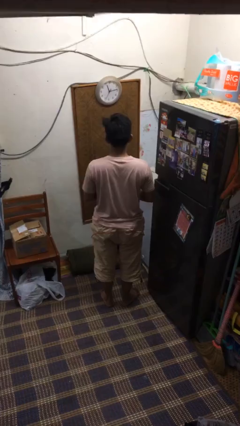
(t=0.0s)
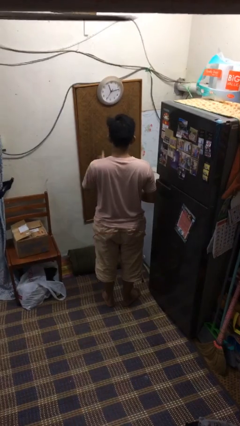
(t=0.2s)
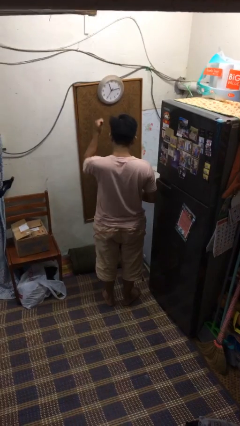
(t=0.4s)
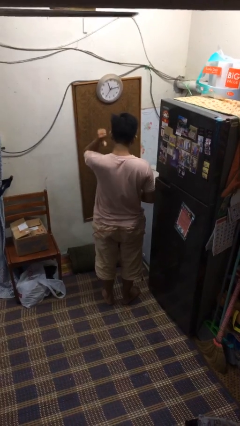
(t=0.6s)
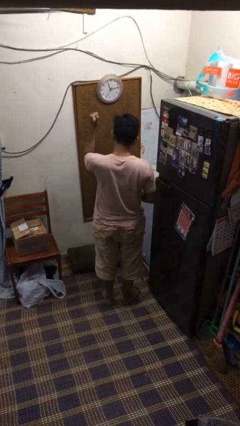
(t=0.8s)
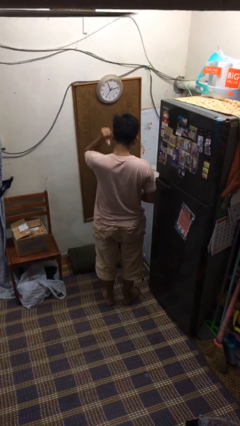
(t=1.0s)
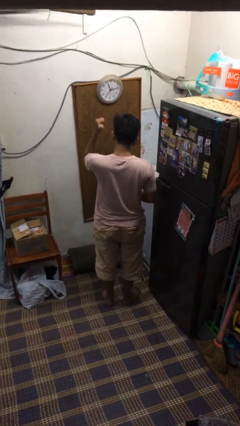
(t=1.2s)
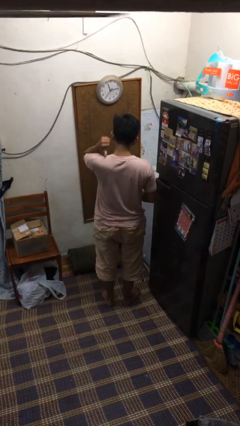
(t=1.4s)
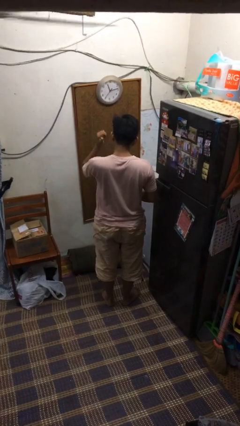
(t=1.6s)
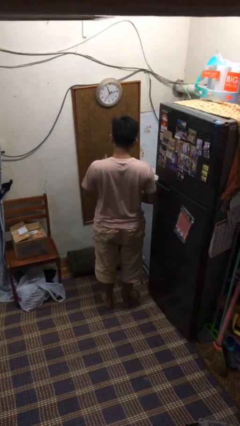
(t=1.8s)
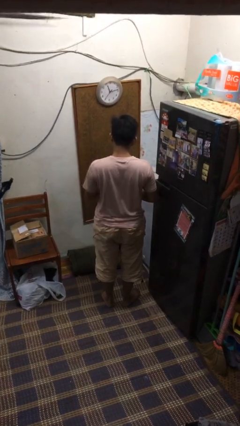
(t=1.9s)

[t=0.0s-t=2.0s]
person gestures behind me

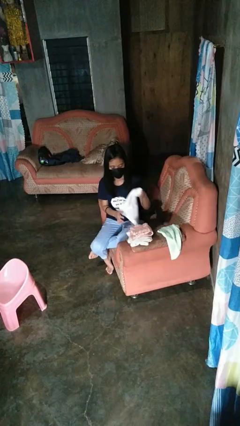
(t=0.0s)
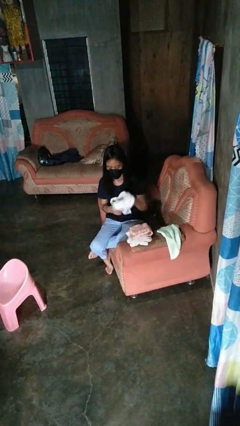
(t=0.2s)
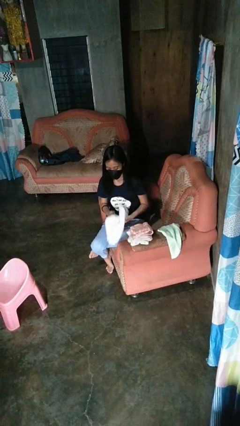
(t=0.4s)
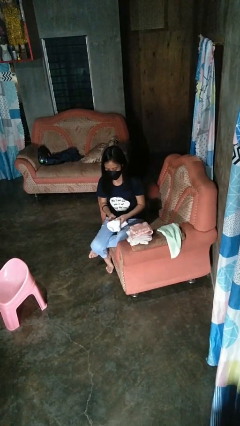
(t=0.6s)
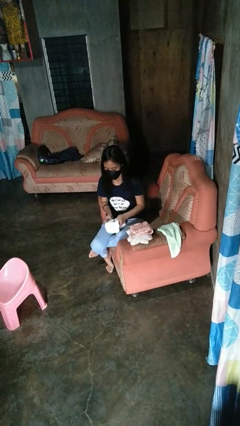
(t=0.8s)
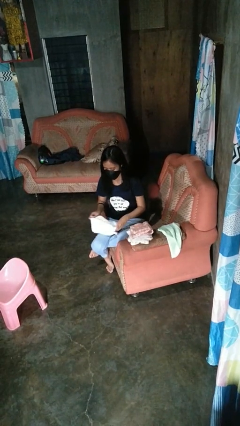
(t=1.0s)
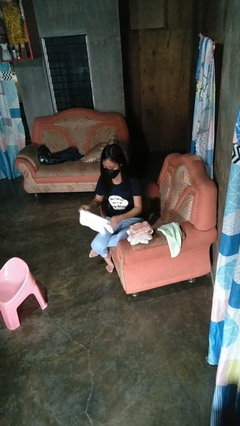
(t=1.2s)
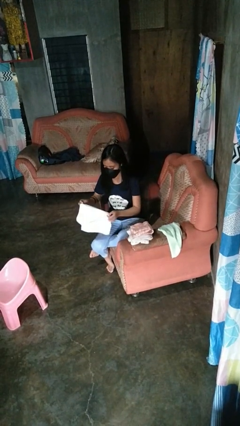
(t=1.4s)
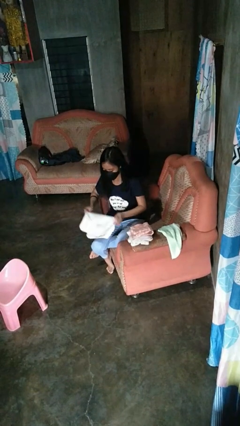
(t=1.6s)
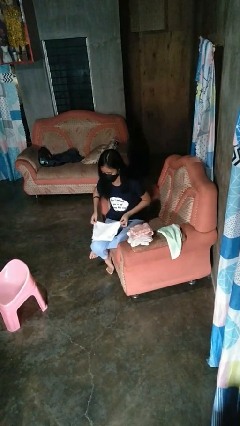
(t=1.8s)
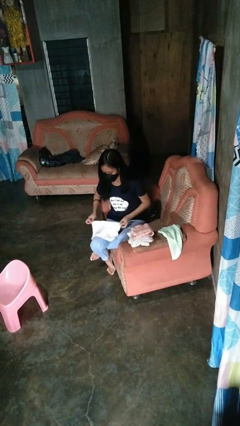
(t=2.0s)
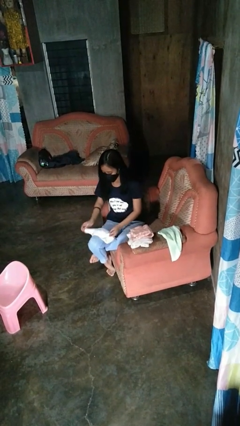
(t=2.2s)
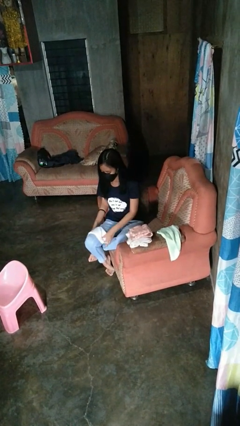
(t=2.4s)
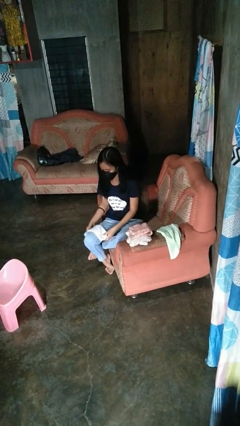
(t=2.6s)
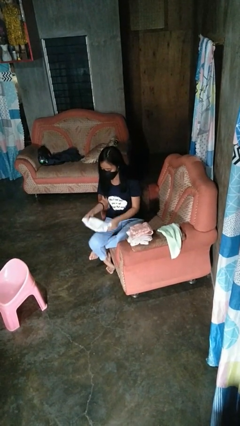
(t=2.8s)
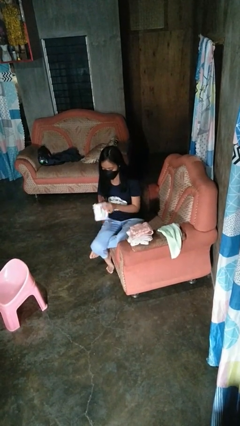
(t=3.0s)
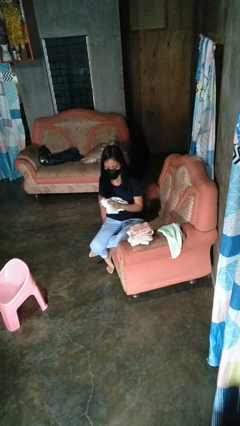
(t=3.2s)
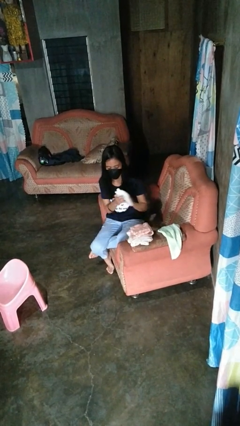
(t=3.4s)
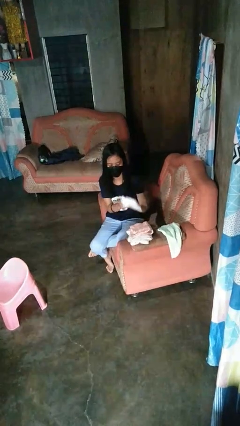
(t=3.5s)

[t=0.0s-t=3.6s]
person folds towel

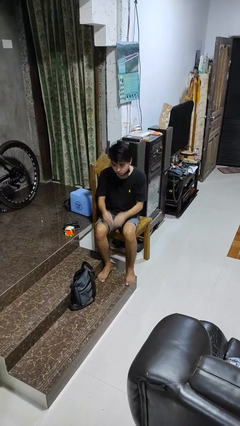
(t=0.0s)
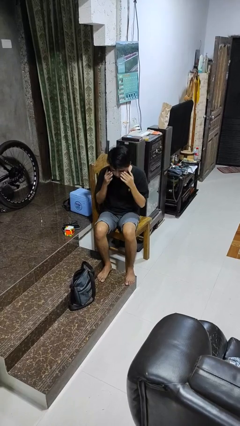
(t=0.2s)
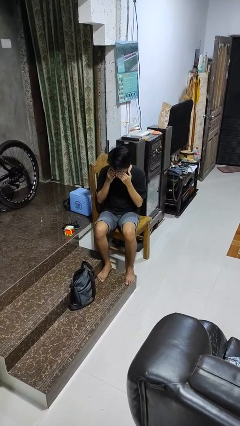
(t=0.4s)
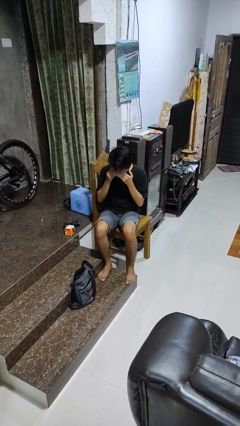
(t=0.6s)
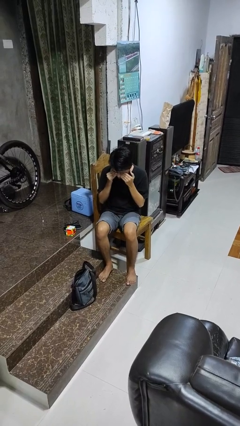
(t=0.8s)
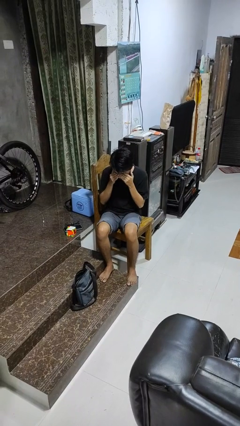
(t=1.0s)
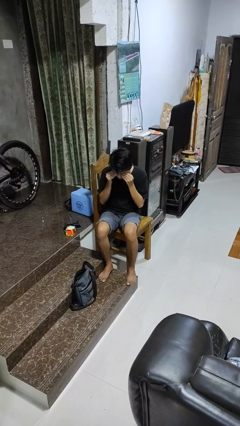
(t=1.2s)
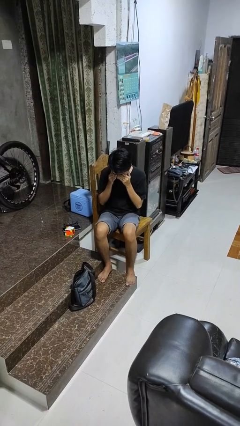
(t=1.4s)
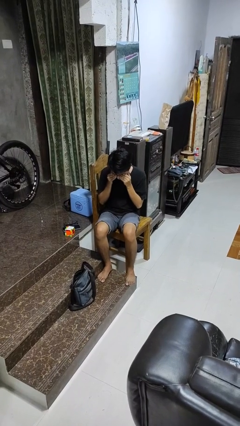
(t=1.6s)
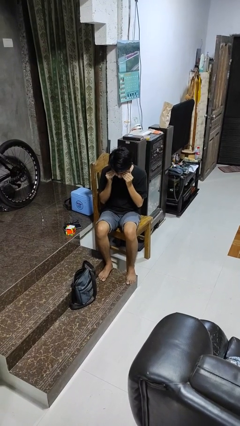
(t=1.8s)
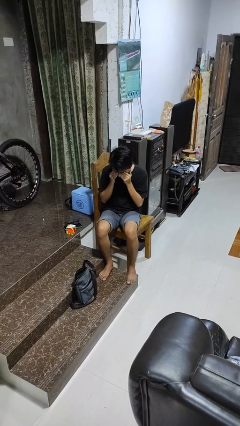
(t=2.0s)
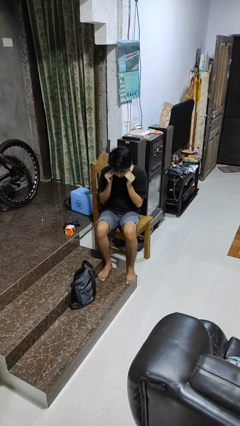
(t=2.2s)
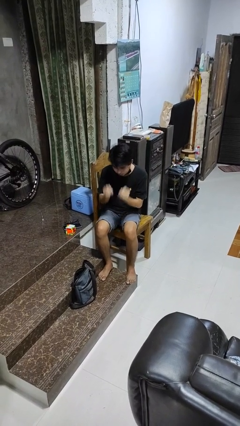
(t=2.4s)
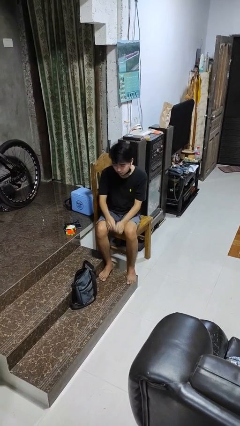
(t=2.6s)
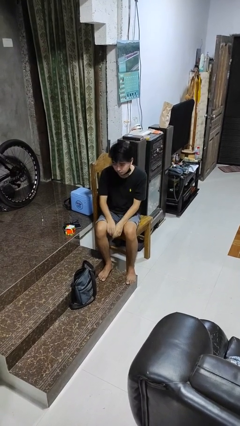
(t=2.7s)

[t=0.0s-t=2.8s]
person rubs eyes

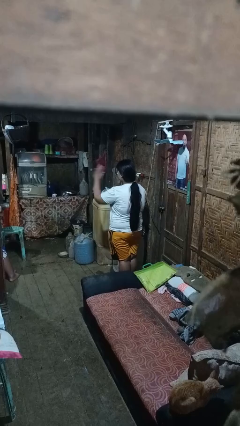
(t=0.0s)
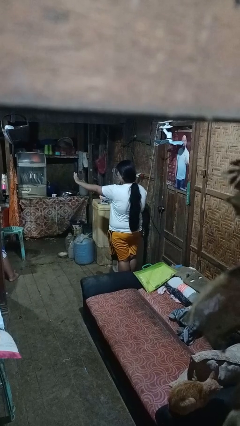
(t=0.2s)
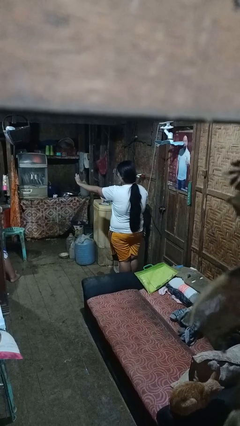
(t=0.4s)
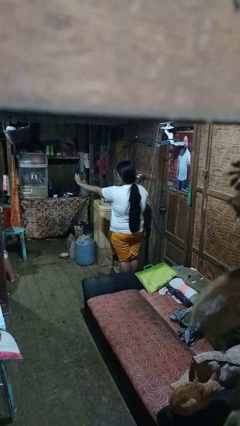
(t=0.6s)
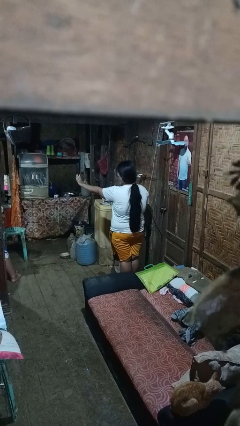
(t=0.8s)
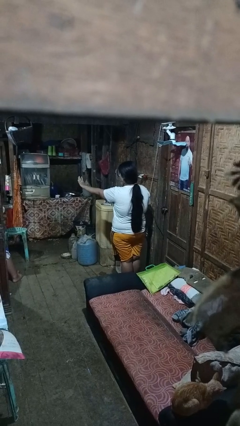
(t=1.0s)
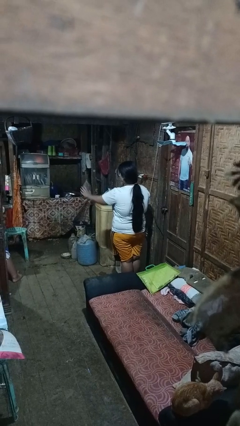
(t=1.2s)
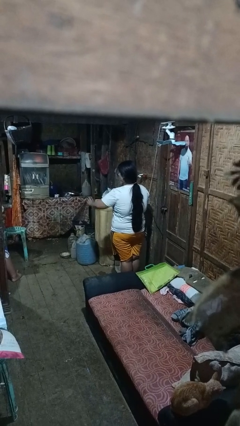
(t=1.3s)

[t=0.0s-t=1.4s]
person gestures stop

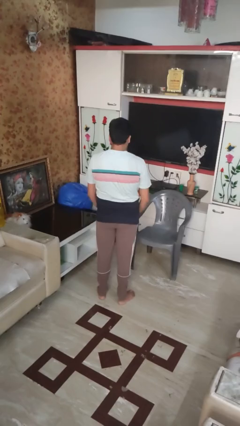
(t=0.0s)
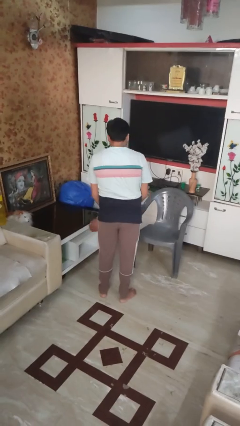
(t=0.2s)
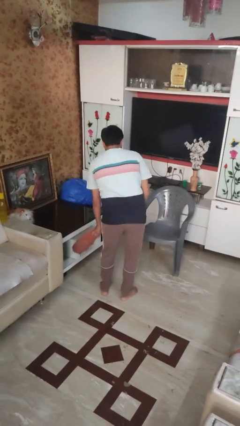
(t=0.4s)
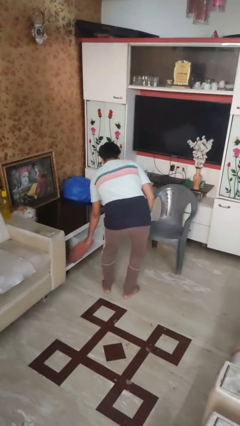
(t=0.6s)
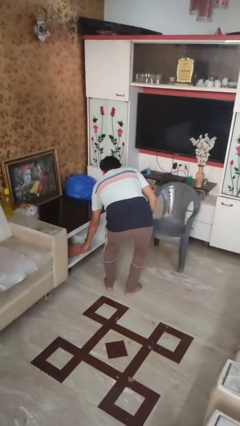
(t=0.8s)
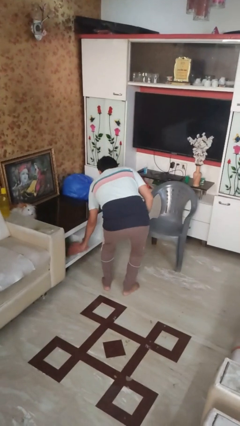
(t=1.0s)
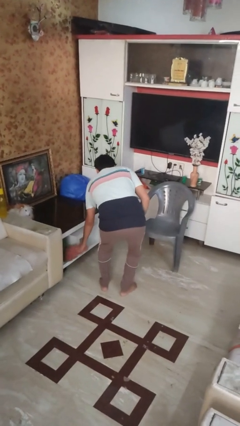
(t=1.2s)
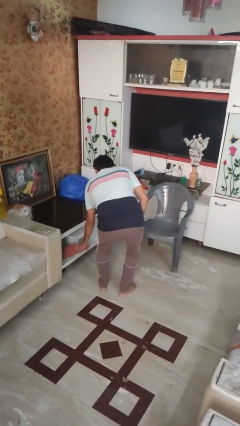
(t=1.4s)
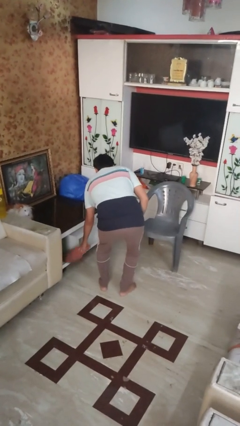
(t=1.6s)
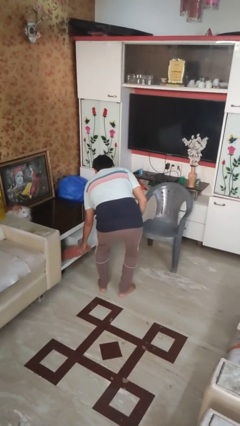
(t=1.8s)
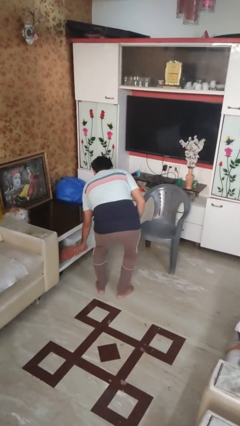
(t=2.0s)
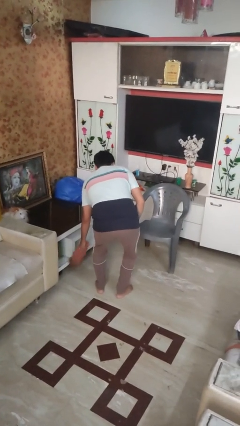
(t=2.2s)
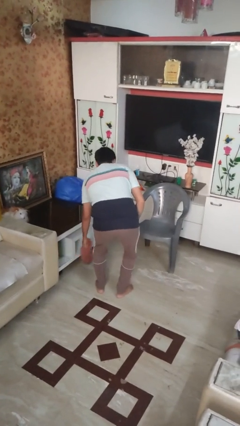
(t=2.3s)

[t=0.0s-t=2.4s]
person dusts furniture

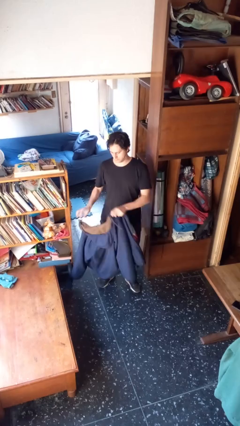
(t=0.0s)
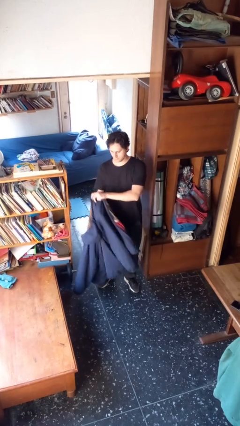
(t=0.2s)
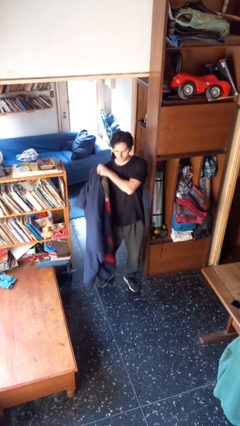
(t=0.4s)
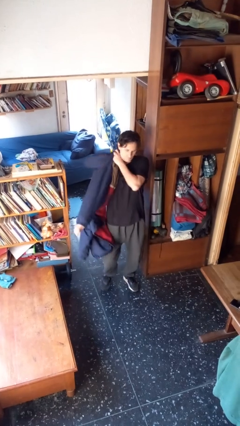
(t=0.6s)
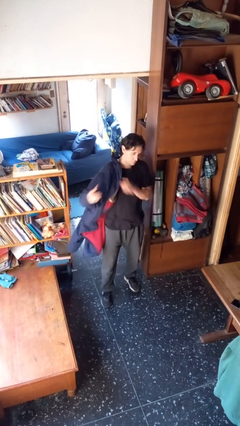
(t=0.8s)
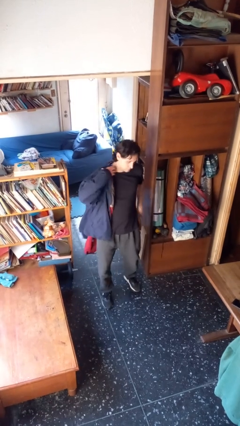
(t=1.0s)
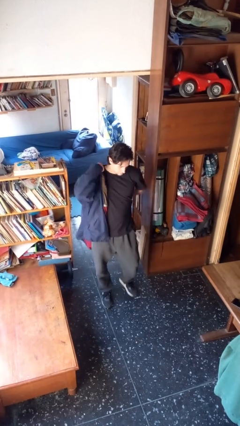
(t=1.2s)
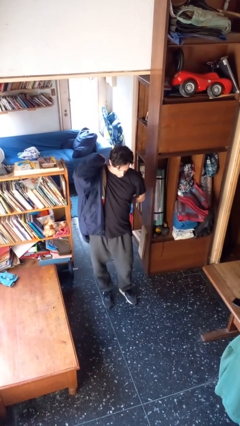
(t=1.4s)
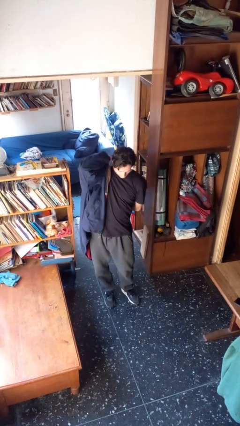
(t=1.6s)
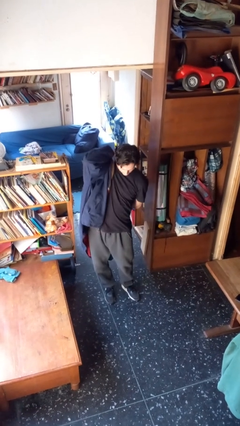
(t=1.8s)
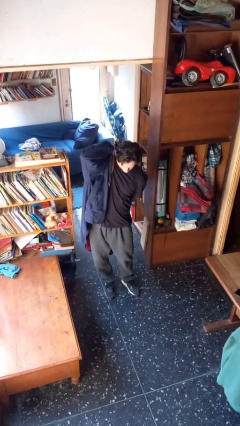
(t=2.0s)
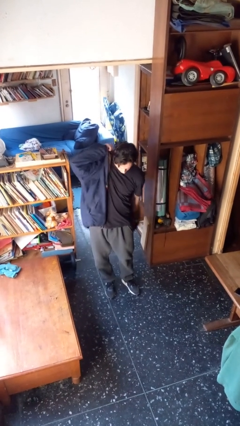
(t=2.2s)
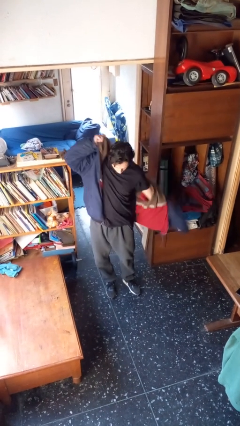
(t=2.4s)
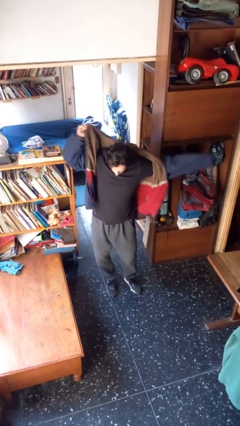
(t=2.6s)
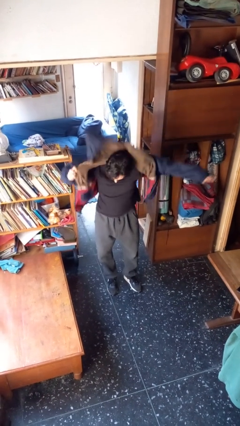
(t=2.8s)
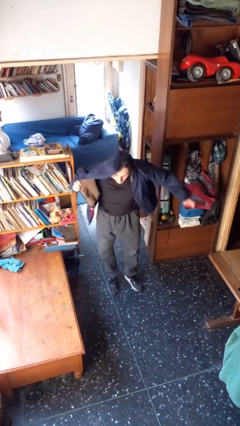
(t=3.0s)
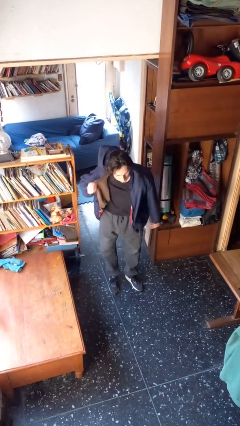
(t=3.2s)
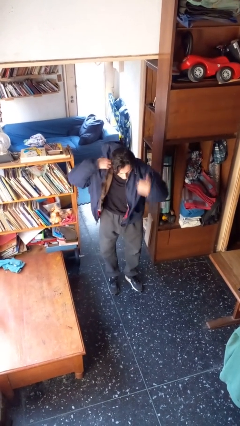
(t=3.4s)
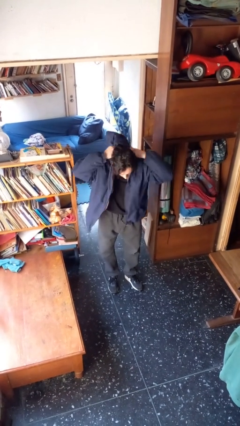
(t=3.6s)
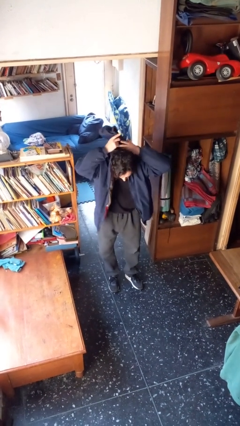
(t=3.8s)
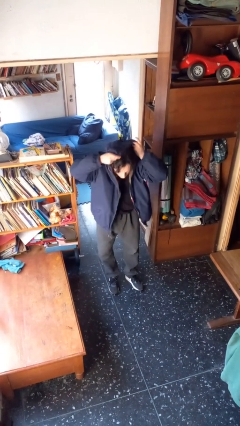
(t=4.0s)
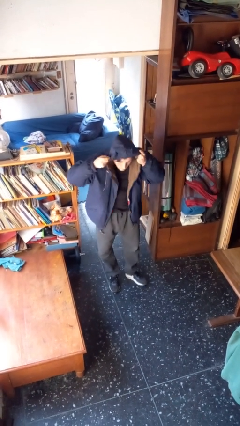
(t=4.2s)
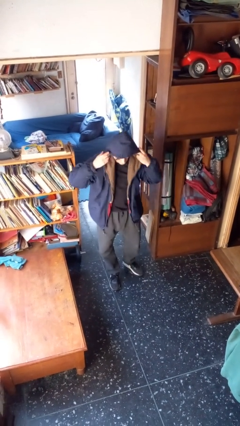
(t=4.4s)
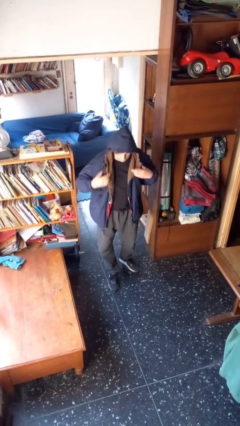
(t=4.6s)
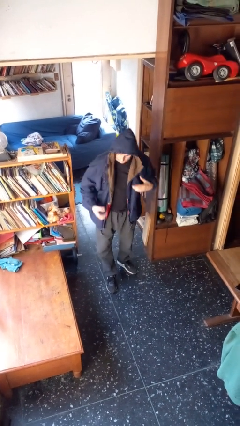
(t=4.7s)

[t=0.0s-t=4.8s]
person puts on hoodie

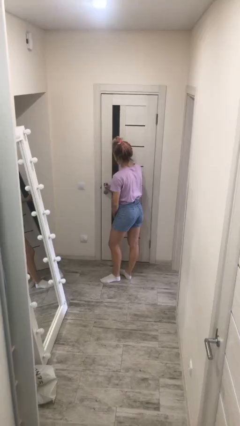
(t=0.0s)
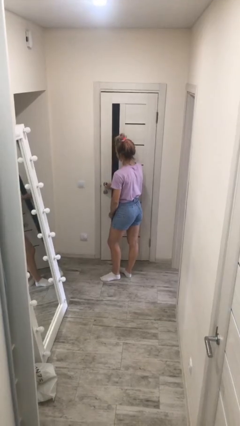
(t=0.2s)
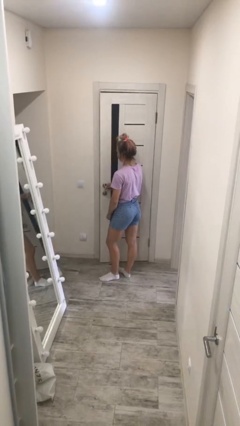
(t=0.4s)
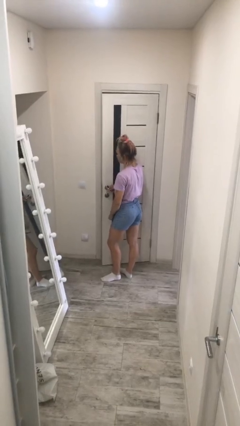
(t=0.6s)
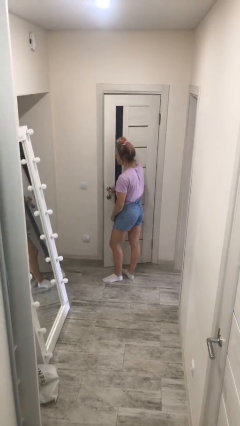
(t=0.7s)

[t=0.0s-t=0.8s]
person opens facility door
